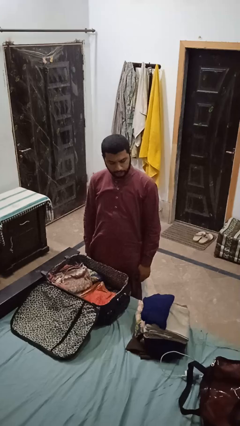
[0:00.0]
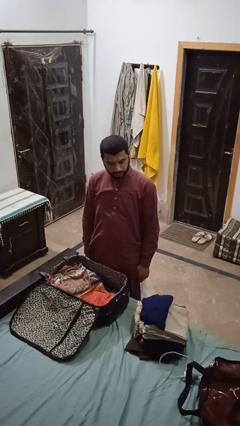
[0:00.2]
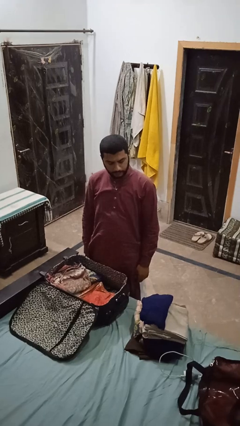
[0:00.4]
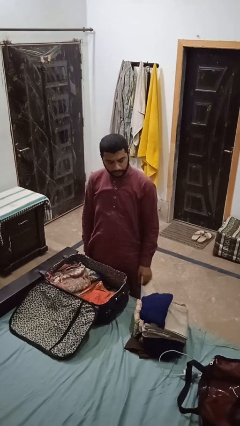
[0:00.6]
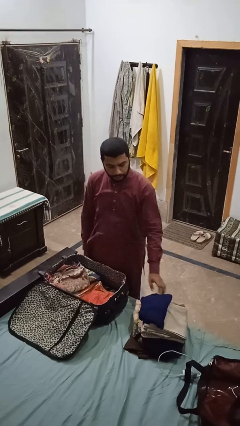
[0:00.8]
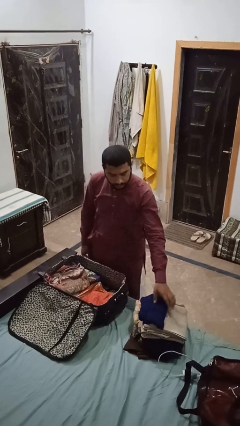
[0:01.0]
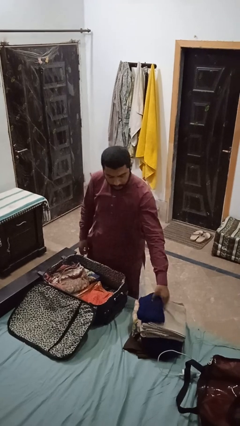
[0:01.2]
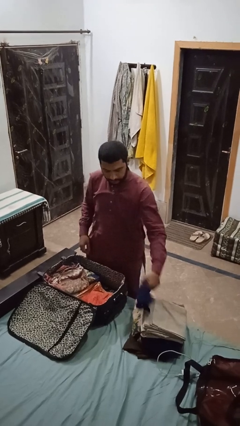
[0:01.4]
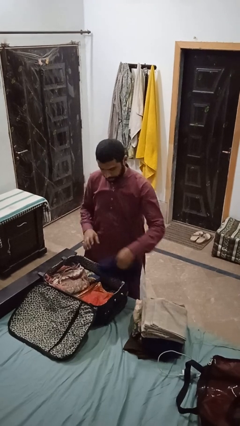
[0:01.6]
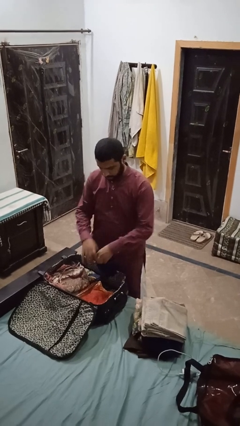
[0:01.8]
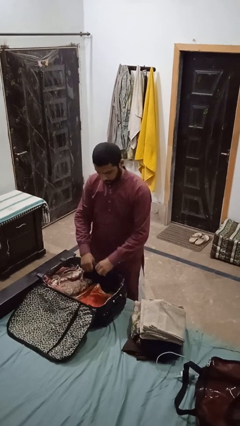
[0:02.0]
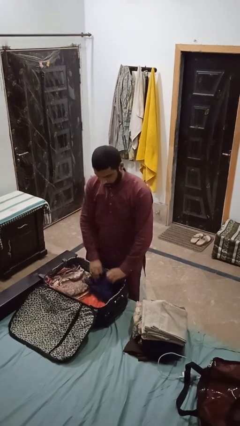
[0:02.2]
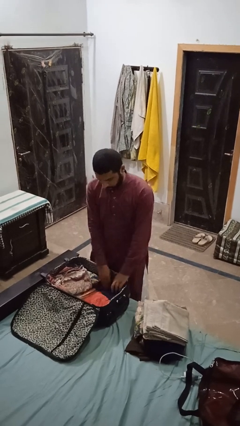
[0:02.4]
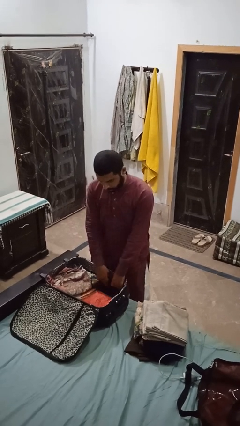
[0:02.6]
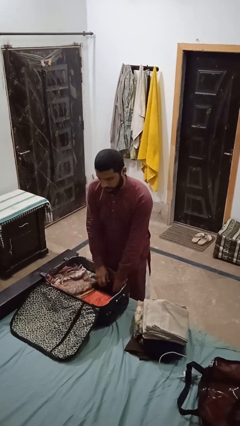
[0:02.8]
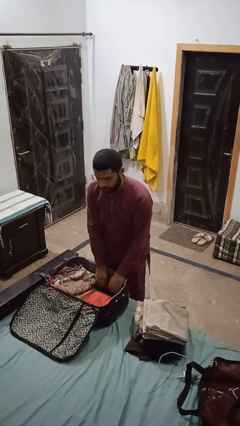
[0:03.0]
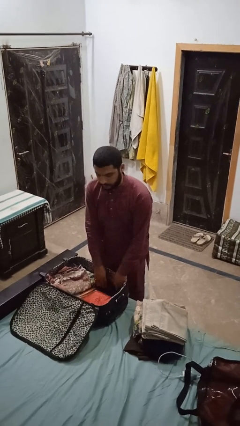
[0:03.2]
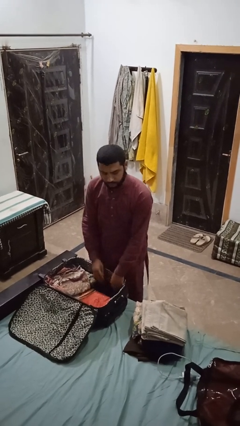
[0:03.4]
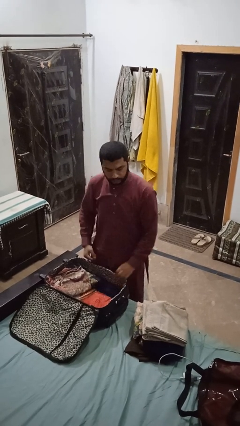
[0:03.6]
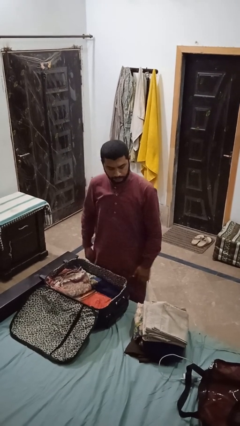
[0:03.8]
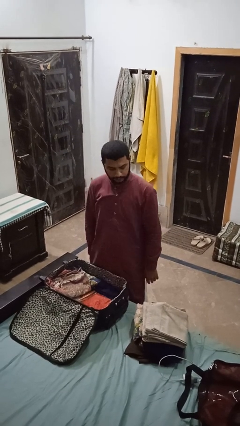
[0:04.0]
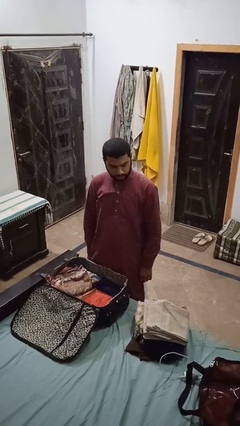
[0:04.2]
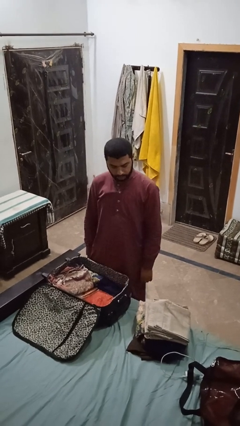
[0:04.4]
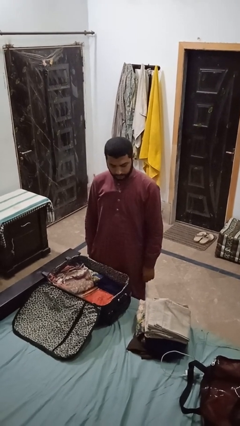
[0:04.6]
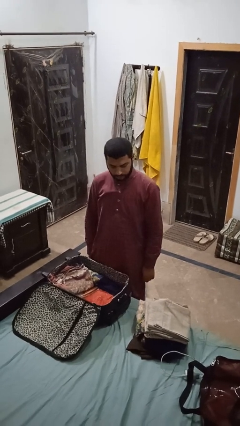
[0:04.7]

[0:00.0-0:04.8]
person loads clothes into suitcase

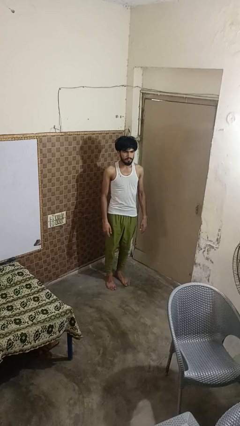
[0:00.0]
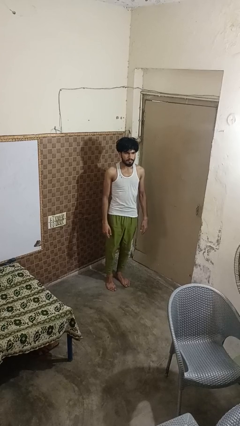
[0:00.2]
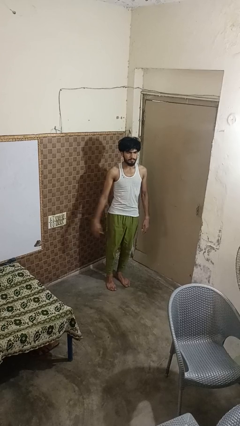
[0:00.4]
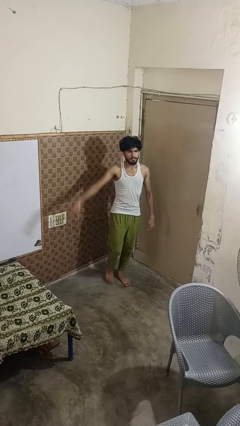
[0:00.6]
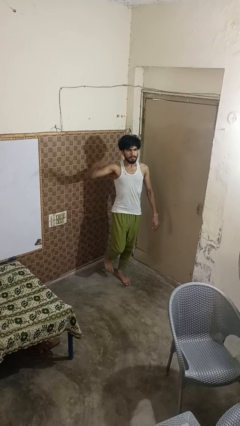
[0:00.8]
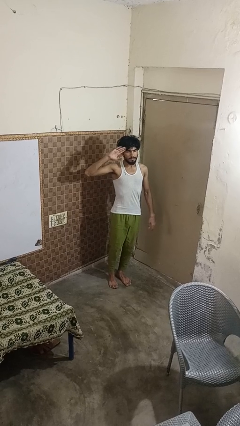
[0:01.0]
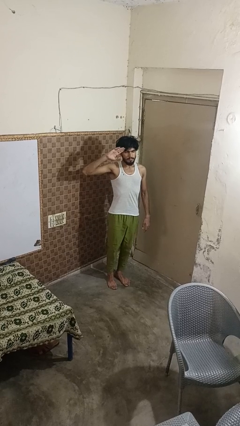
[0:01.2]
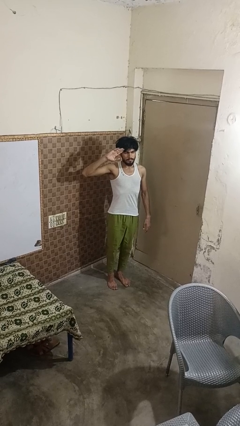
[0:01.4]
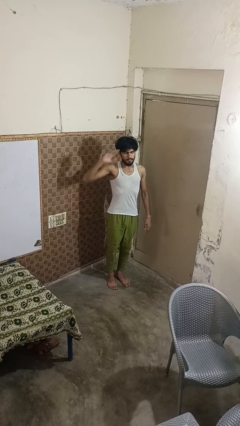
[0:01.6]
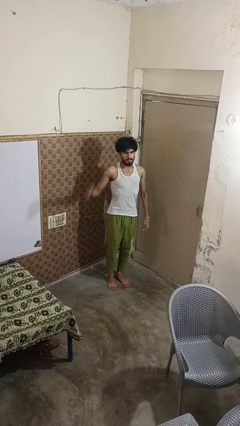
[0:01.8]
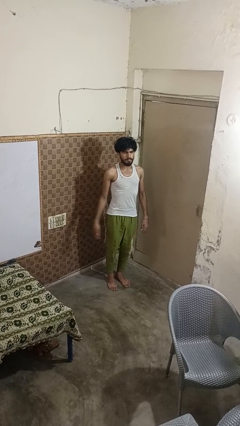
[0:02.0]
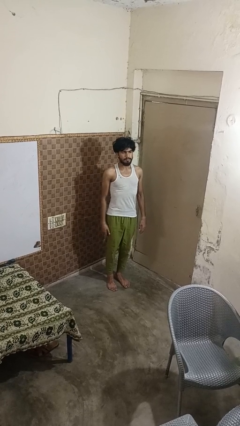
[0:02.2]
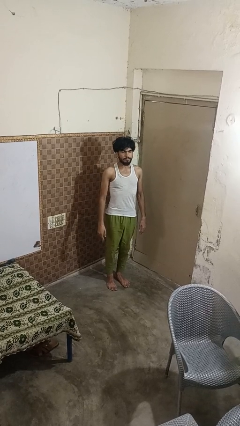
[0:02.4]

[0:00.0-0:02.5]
person salutes

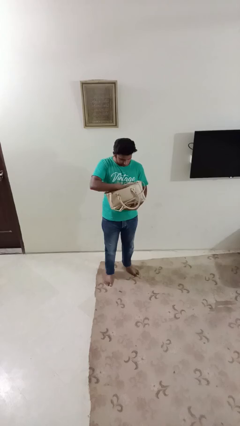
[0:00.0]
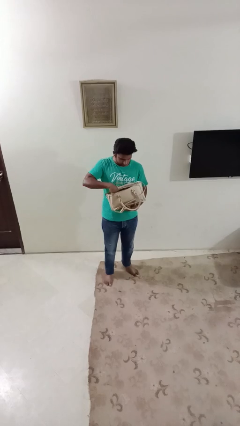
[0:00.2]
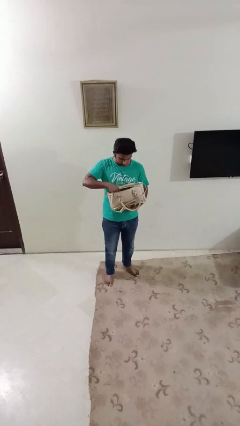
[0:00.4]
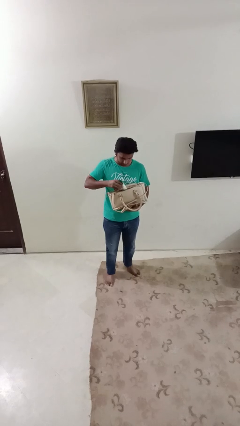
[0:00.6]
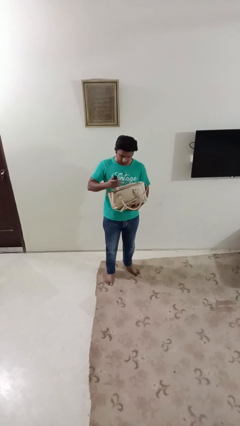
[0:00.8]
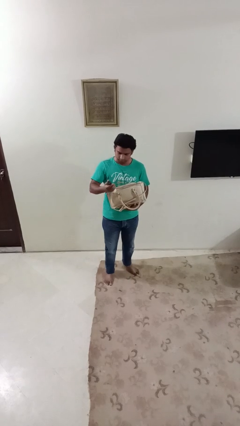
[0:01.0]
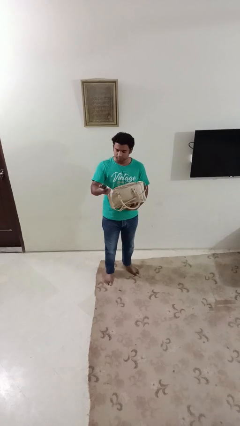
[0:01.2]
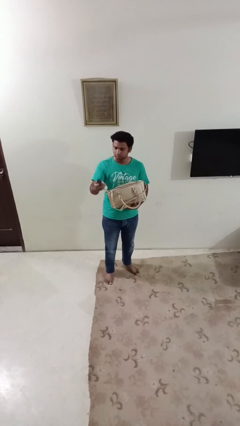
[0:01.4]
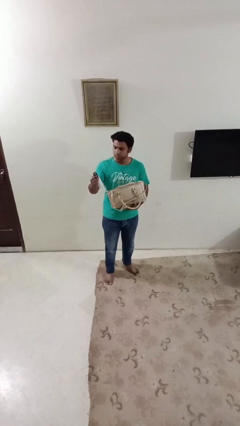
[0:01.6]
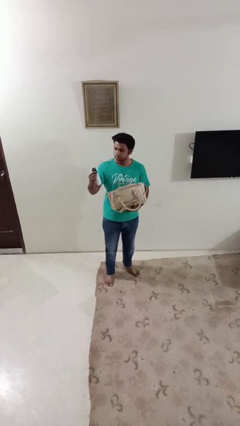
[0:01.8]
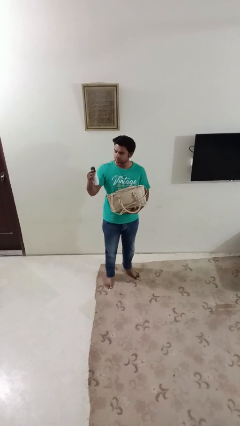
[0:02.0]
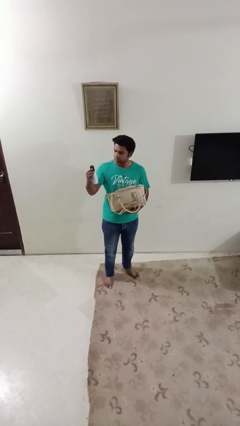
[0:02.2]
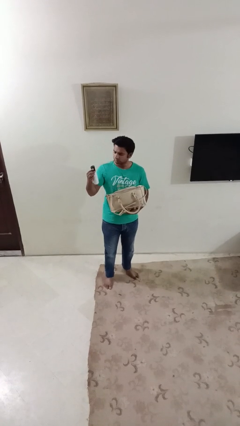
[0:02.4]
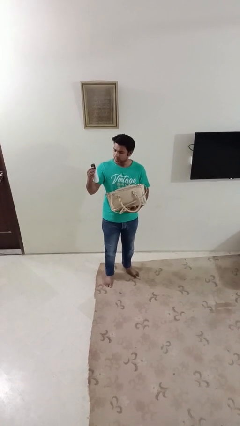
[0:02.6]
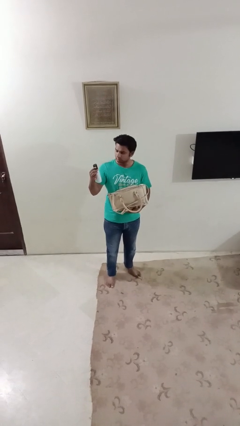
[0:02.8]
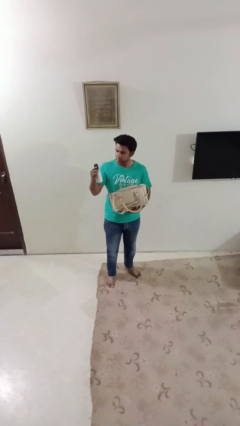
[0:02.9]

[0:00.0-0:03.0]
person takes object from purse

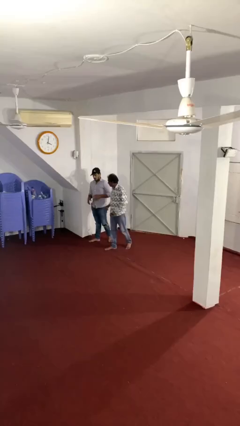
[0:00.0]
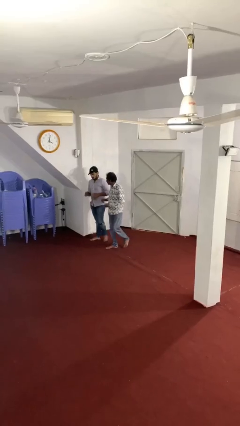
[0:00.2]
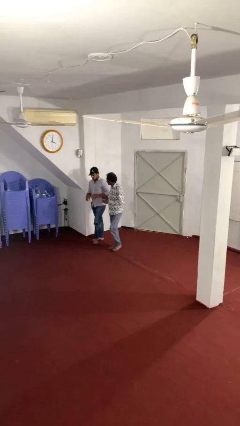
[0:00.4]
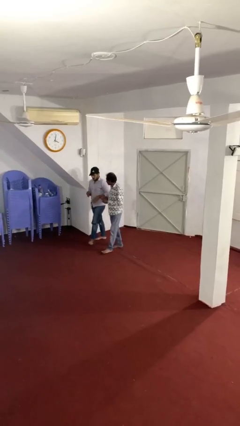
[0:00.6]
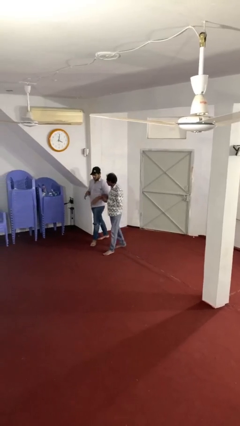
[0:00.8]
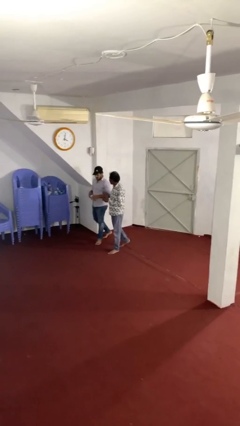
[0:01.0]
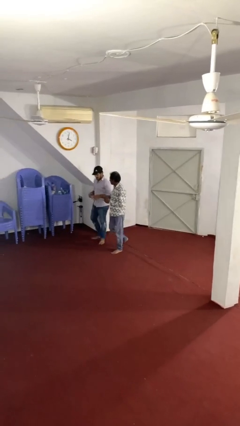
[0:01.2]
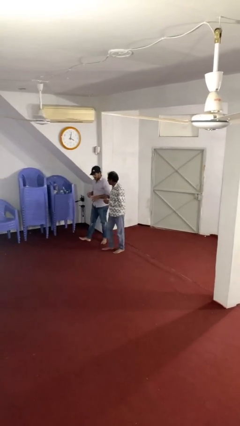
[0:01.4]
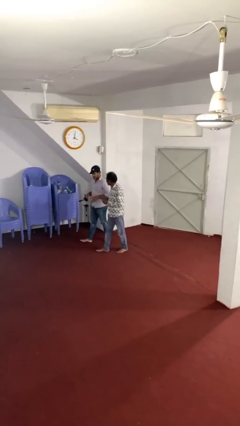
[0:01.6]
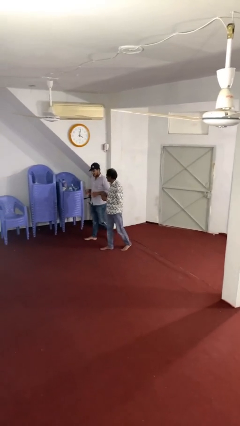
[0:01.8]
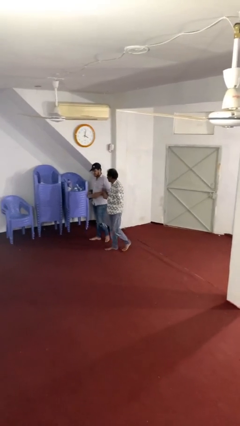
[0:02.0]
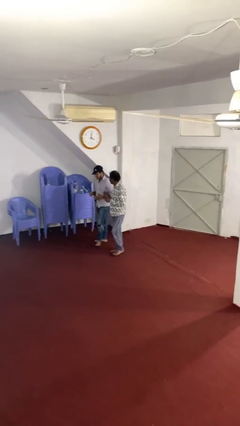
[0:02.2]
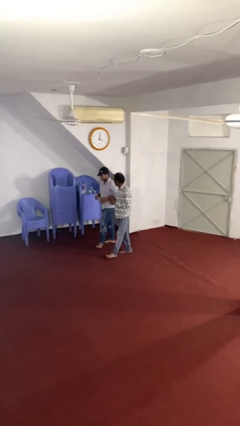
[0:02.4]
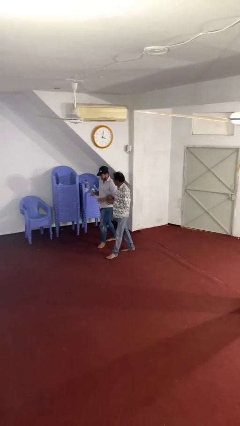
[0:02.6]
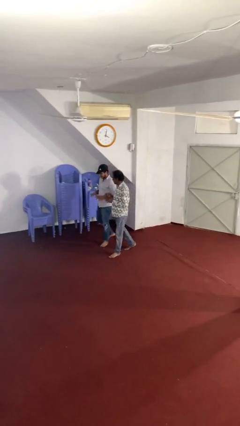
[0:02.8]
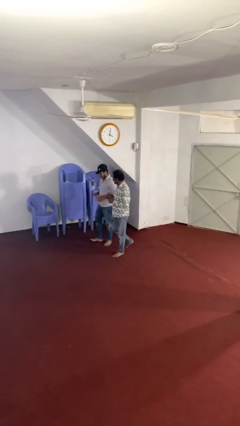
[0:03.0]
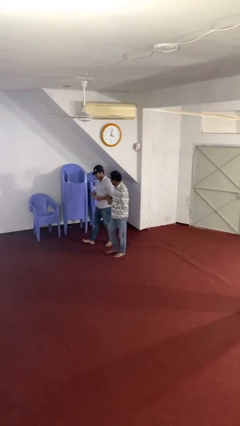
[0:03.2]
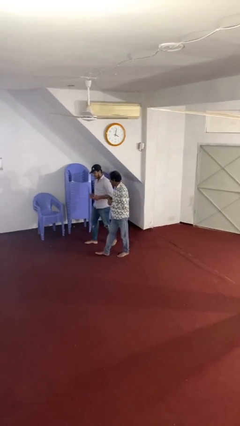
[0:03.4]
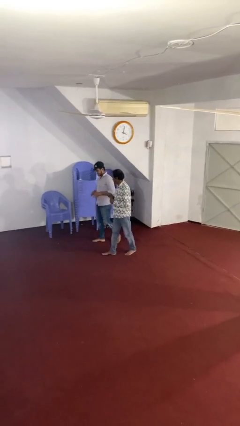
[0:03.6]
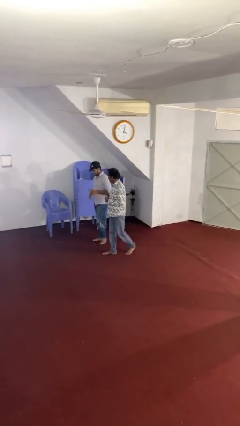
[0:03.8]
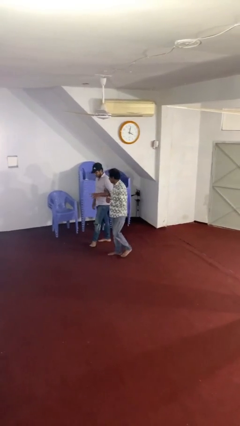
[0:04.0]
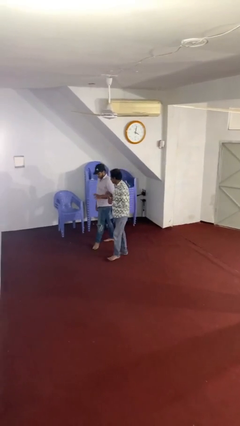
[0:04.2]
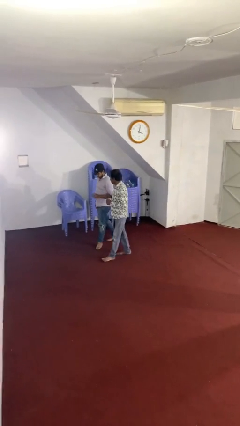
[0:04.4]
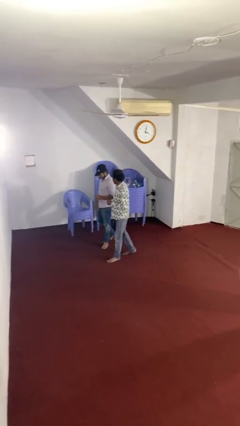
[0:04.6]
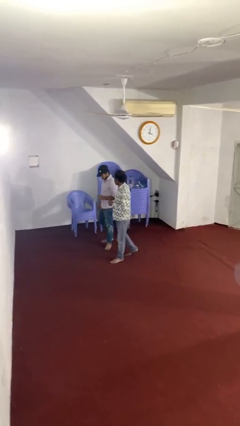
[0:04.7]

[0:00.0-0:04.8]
person talks to person

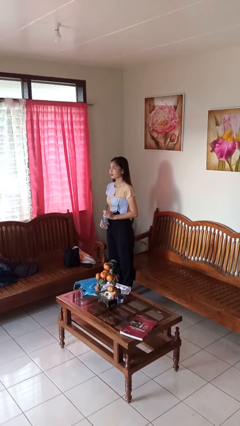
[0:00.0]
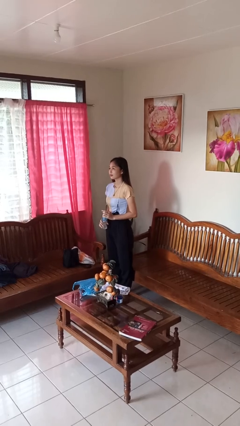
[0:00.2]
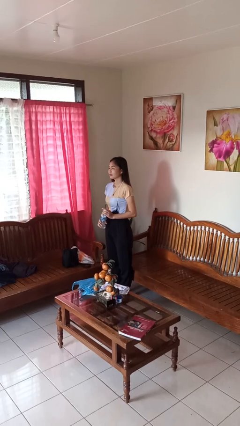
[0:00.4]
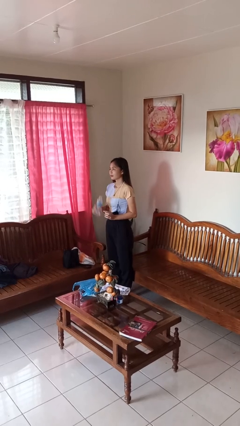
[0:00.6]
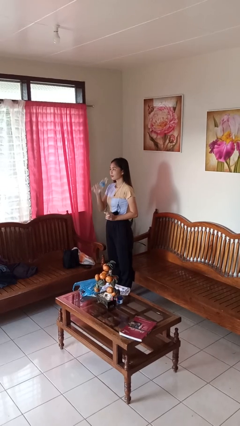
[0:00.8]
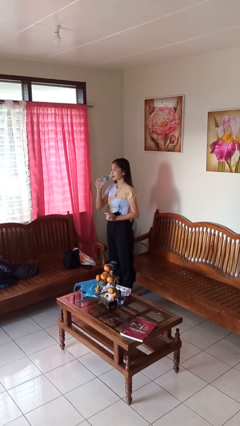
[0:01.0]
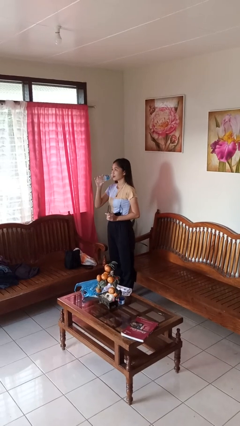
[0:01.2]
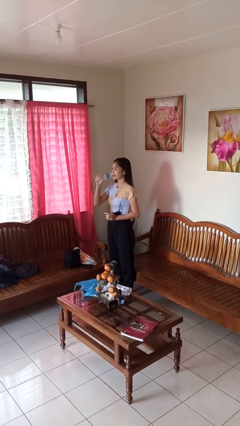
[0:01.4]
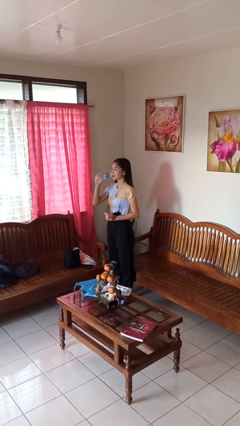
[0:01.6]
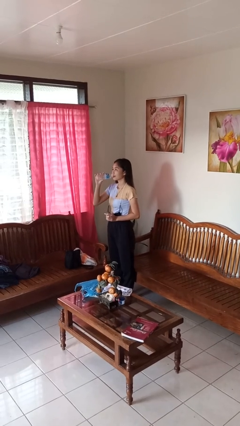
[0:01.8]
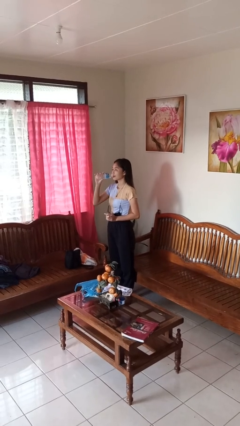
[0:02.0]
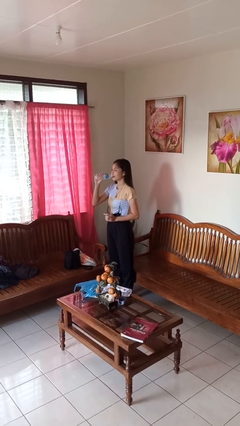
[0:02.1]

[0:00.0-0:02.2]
person drinks from bottle

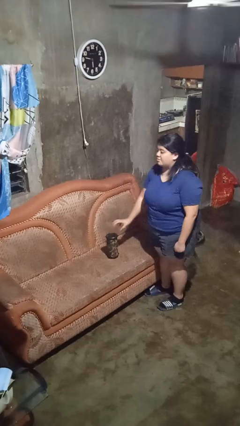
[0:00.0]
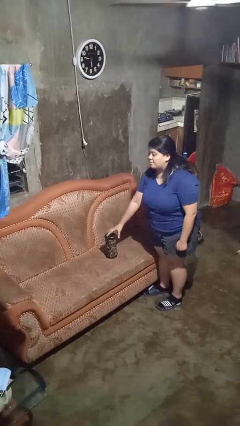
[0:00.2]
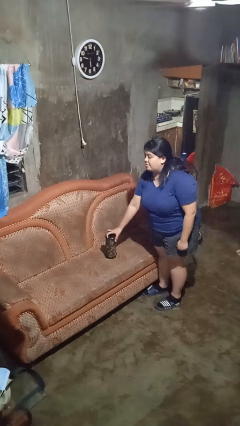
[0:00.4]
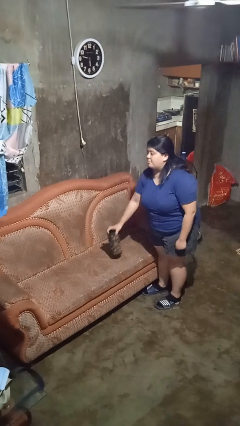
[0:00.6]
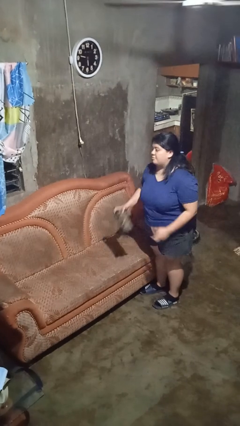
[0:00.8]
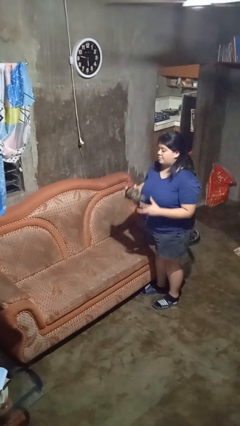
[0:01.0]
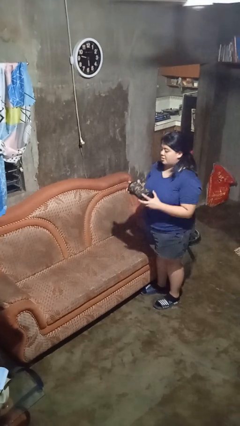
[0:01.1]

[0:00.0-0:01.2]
person picks up object from couch
